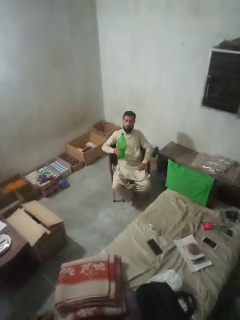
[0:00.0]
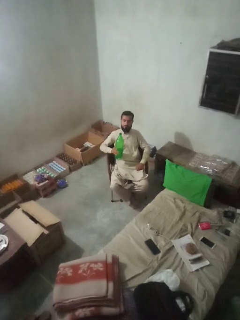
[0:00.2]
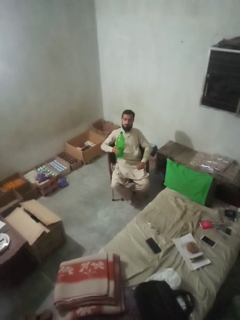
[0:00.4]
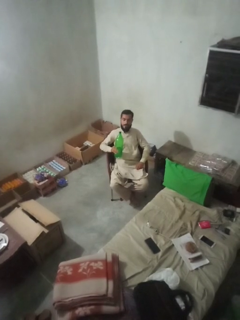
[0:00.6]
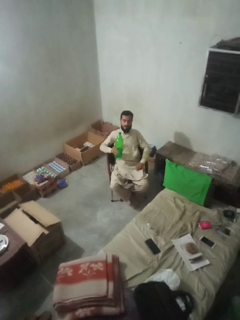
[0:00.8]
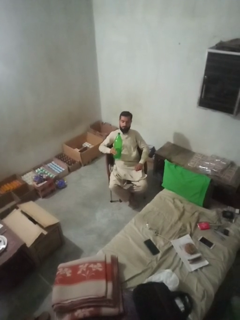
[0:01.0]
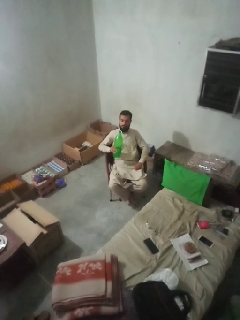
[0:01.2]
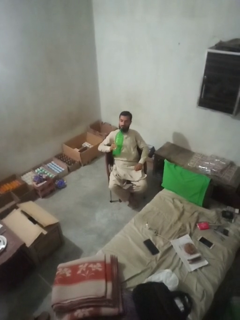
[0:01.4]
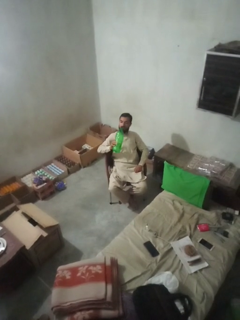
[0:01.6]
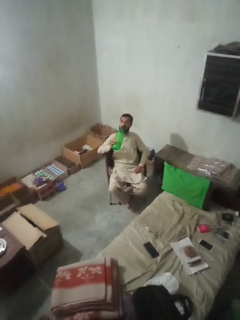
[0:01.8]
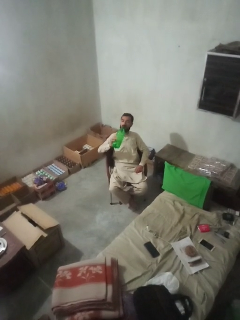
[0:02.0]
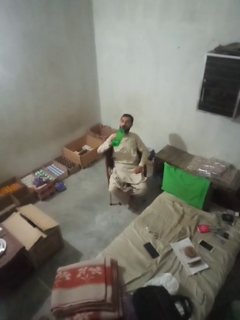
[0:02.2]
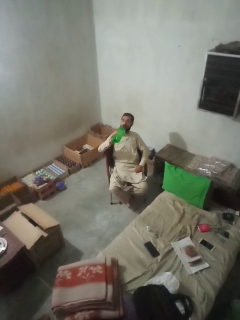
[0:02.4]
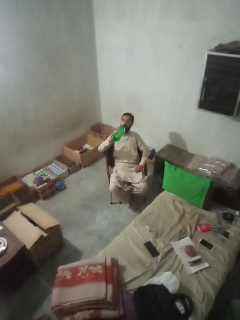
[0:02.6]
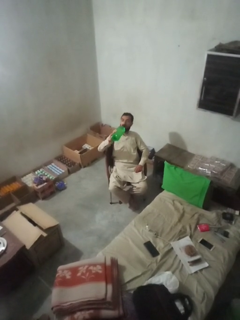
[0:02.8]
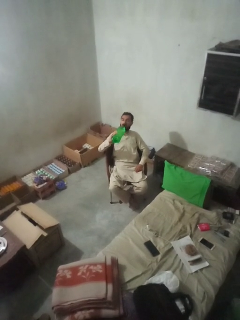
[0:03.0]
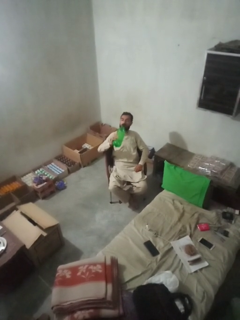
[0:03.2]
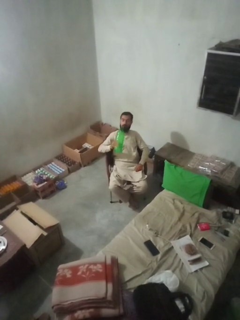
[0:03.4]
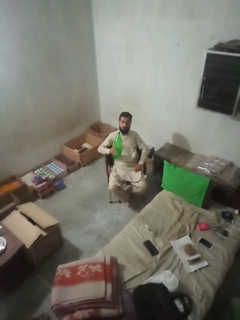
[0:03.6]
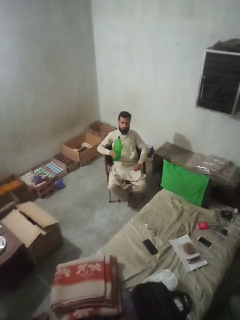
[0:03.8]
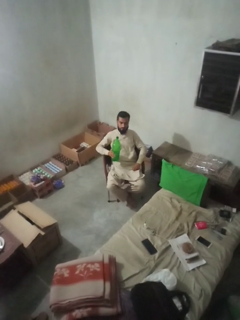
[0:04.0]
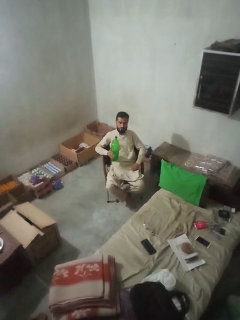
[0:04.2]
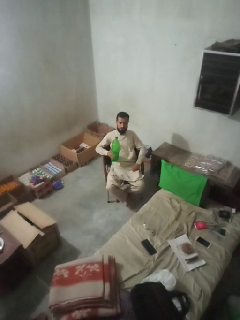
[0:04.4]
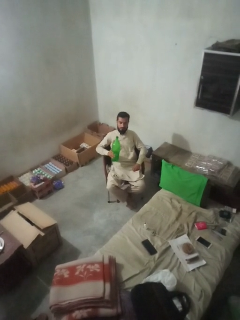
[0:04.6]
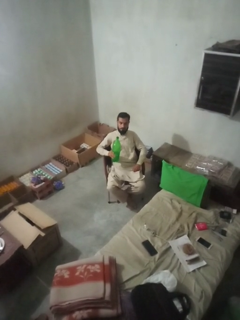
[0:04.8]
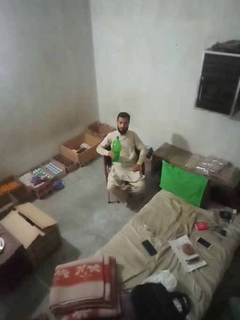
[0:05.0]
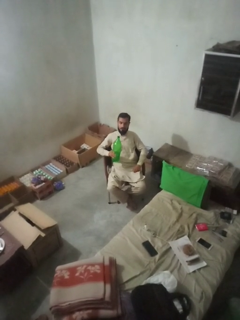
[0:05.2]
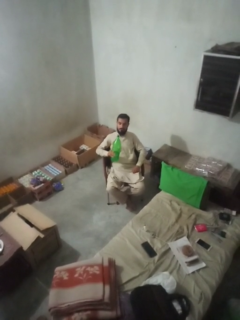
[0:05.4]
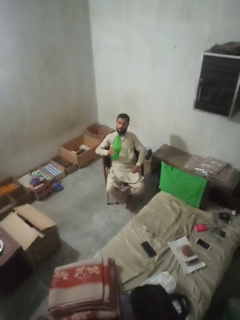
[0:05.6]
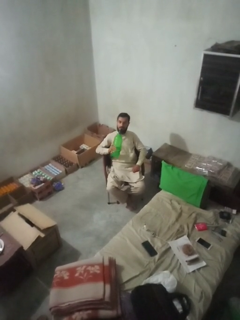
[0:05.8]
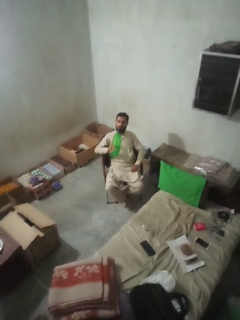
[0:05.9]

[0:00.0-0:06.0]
person drinks from bottle

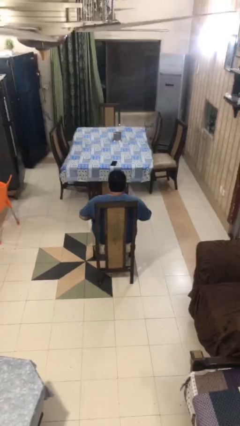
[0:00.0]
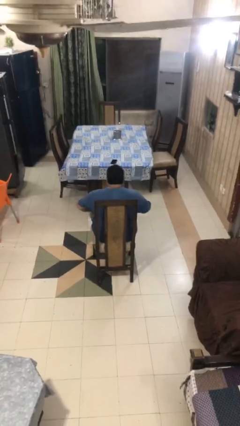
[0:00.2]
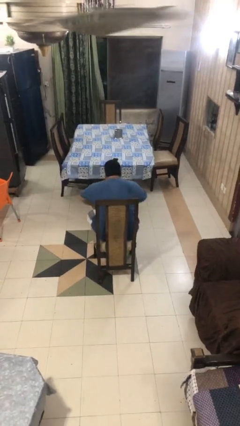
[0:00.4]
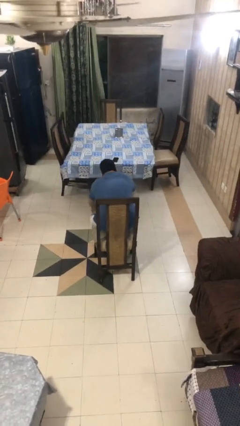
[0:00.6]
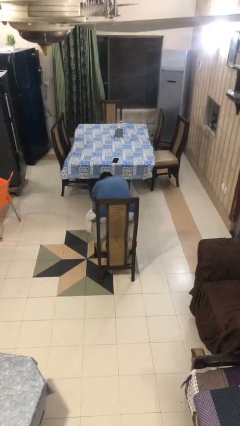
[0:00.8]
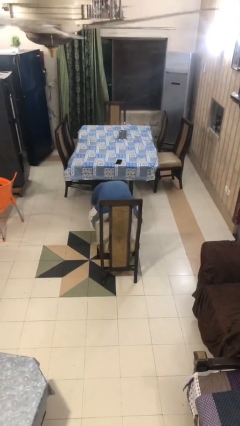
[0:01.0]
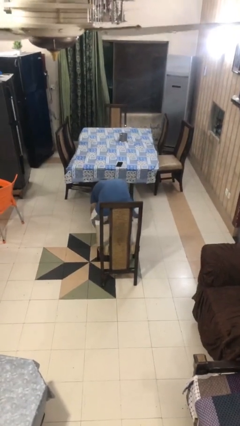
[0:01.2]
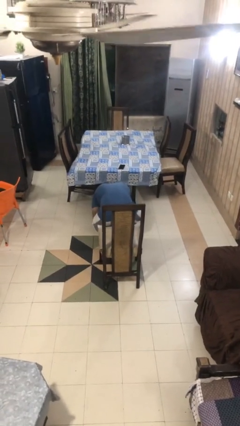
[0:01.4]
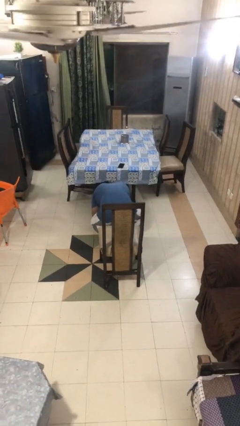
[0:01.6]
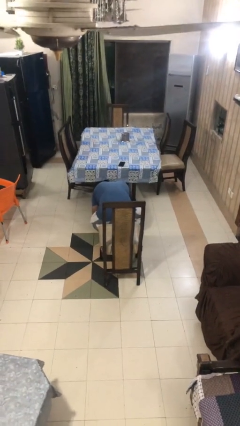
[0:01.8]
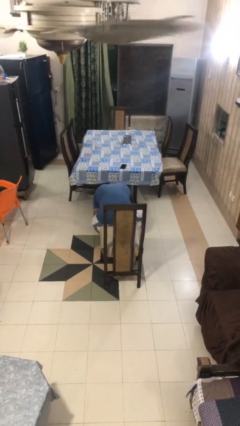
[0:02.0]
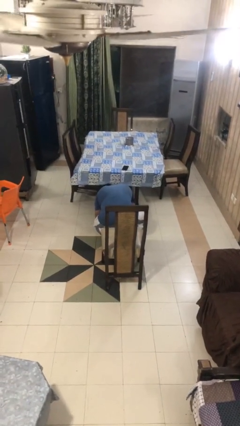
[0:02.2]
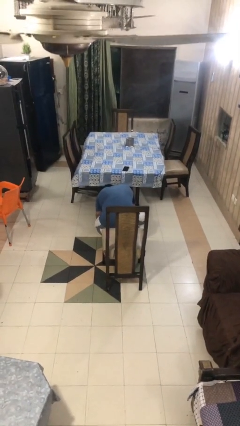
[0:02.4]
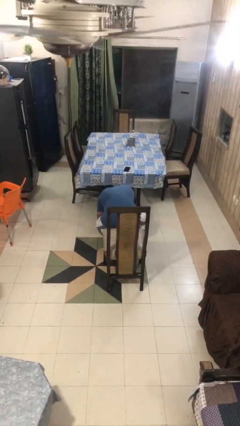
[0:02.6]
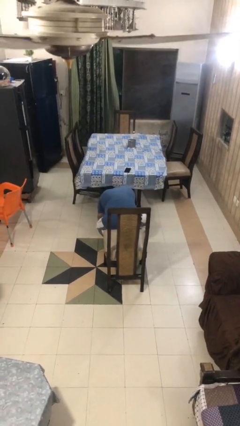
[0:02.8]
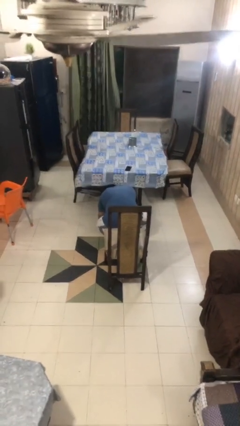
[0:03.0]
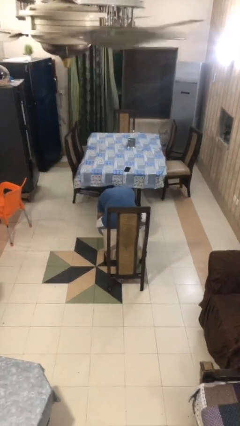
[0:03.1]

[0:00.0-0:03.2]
person falls from chair

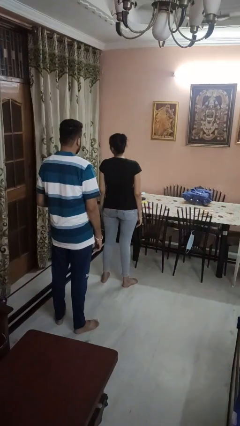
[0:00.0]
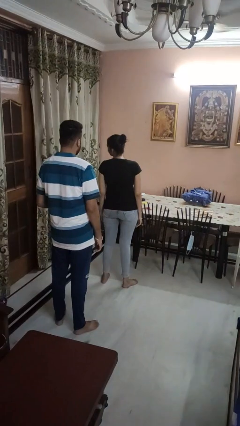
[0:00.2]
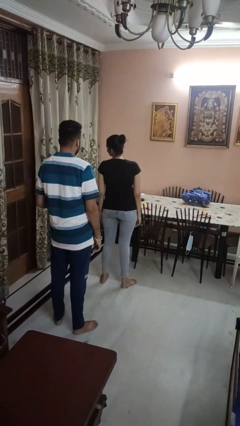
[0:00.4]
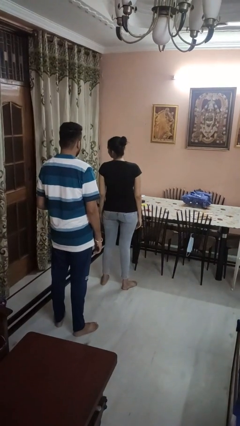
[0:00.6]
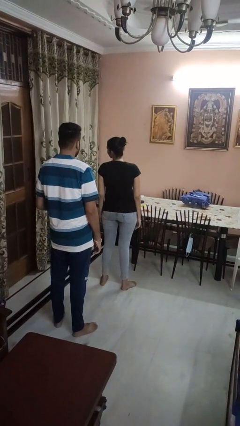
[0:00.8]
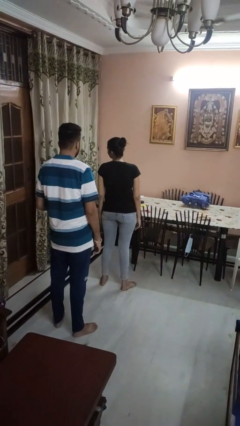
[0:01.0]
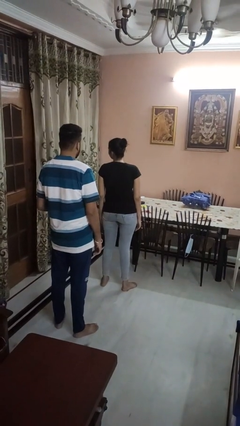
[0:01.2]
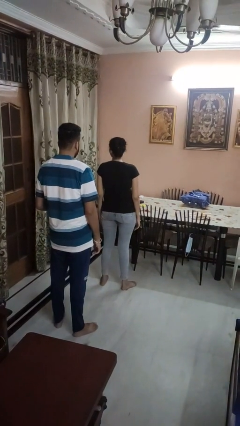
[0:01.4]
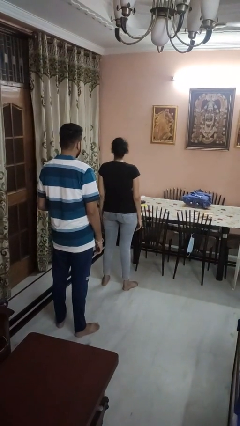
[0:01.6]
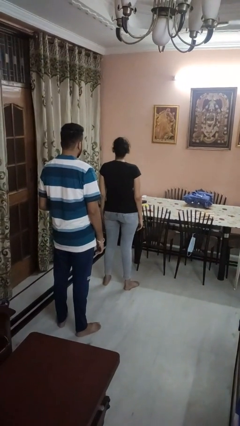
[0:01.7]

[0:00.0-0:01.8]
person looks over shoulder

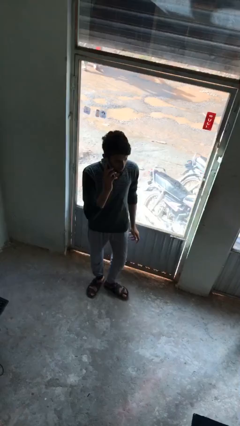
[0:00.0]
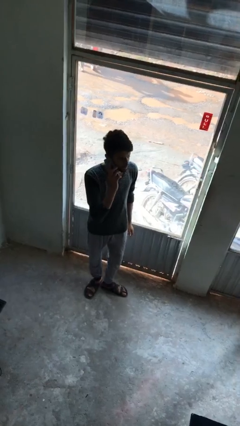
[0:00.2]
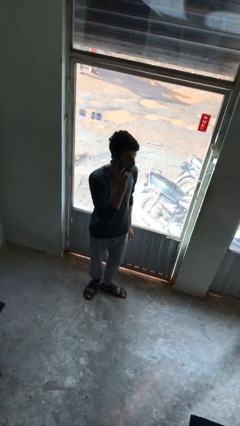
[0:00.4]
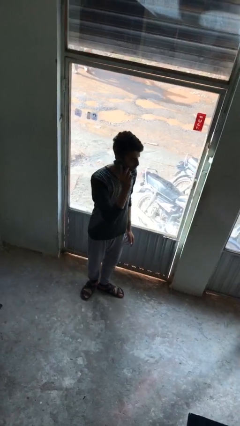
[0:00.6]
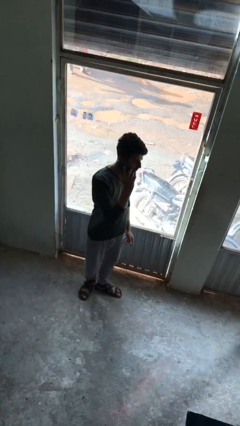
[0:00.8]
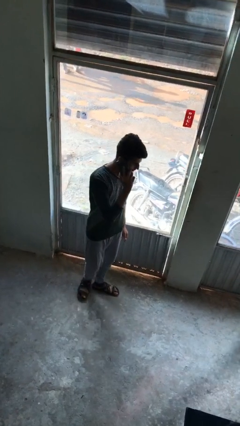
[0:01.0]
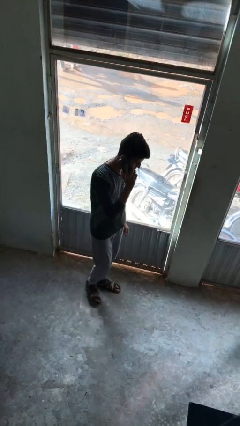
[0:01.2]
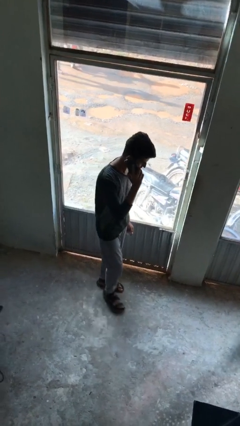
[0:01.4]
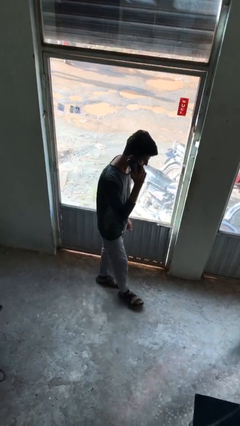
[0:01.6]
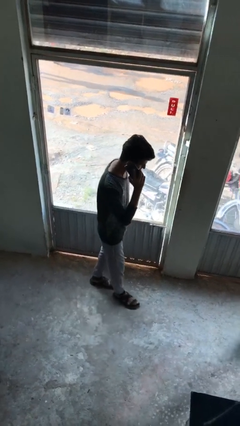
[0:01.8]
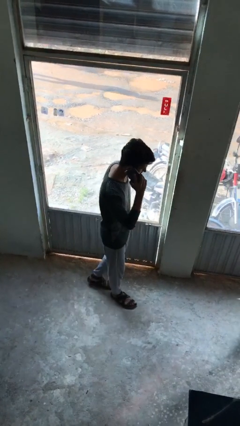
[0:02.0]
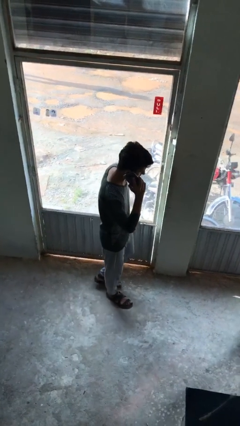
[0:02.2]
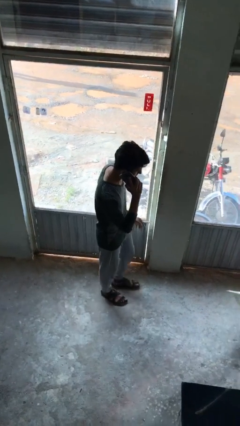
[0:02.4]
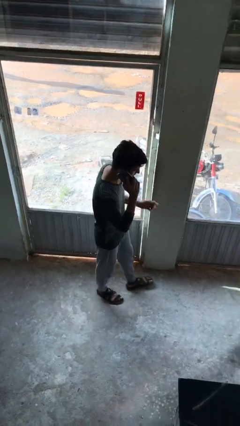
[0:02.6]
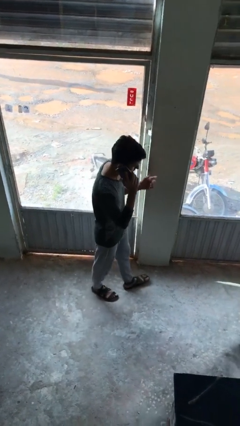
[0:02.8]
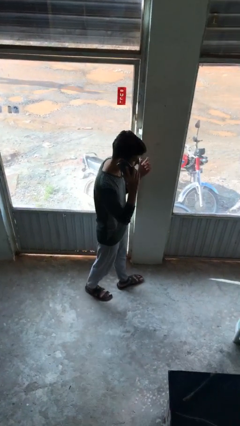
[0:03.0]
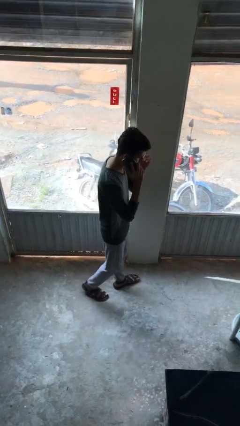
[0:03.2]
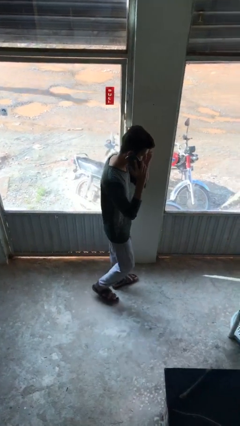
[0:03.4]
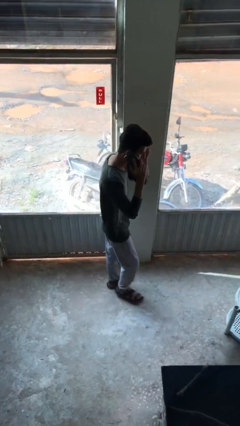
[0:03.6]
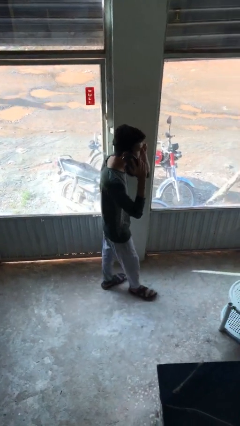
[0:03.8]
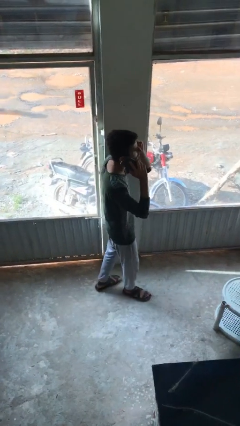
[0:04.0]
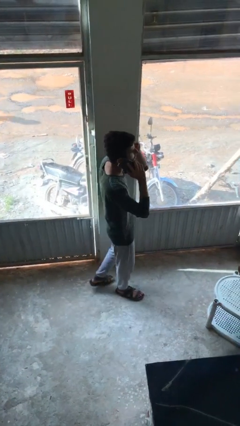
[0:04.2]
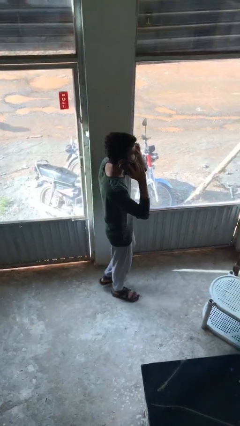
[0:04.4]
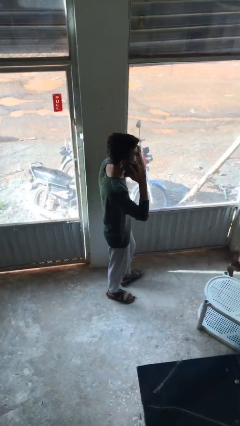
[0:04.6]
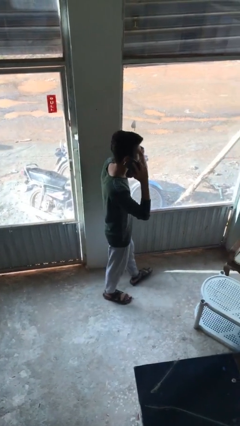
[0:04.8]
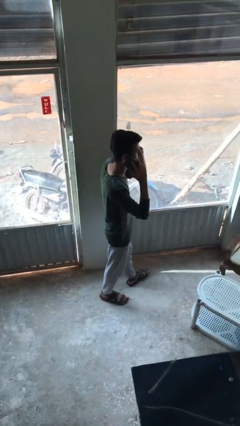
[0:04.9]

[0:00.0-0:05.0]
person talks on phone

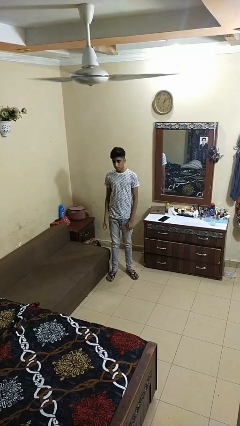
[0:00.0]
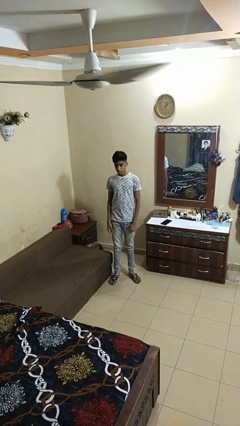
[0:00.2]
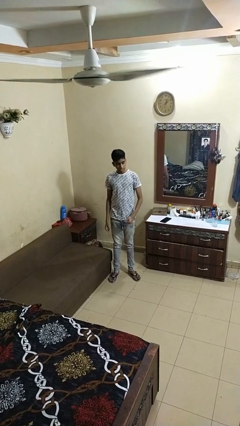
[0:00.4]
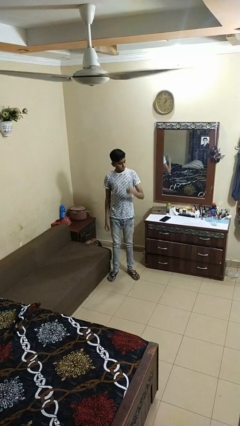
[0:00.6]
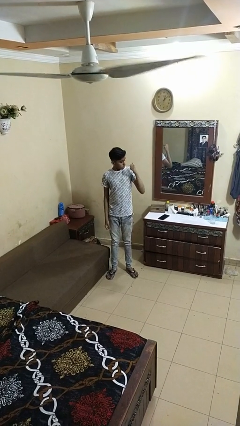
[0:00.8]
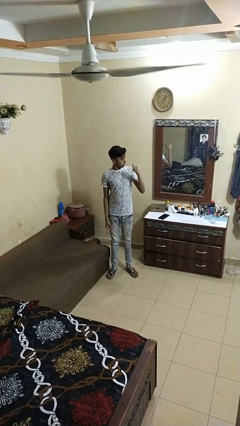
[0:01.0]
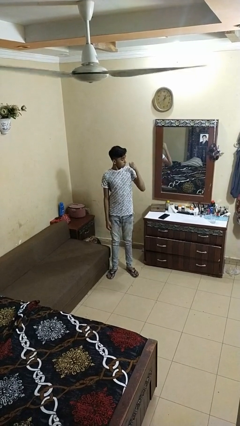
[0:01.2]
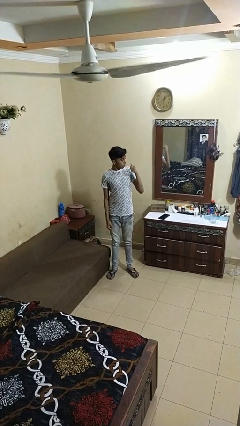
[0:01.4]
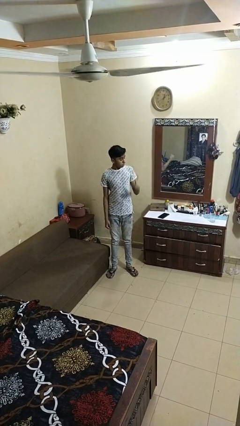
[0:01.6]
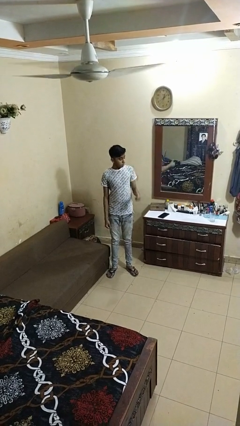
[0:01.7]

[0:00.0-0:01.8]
person gestures behind me

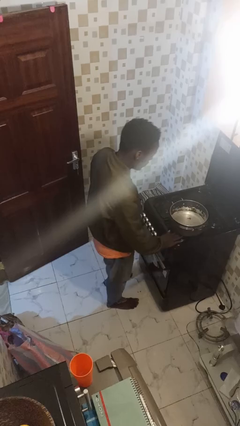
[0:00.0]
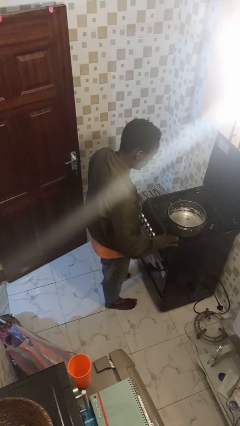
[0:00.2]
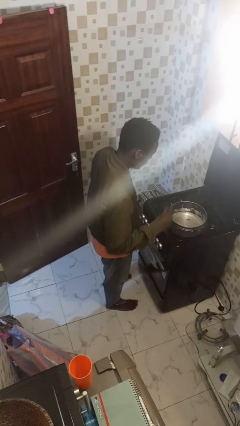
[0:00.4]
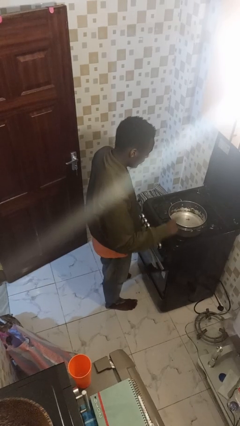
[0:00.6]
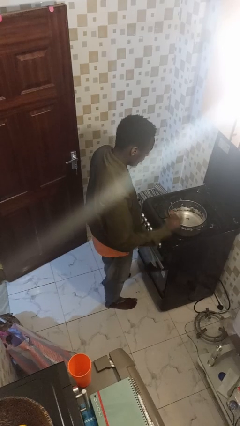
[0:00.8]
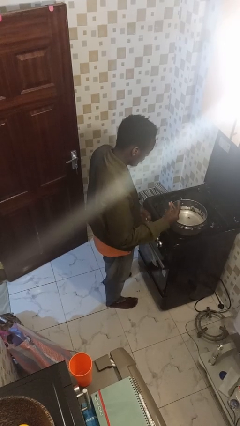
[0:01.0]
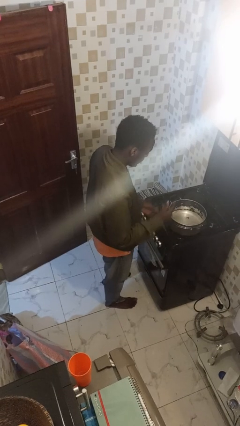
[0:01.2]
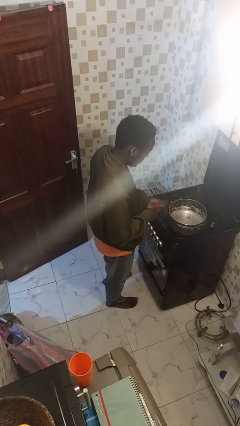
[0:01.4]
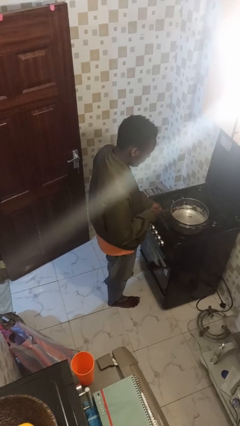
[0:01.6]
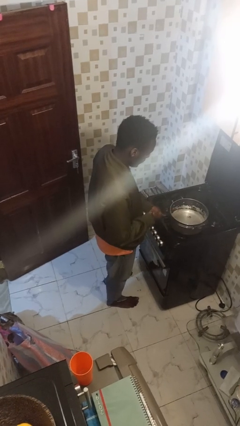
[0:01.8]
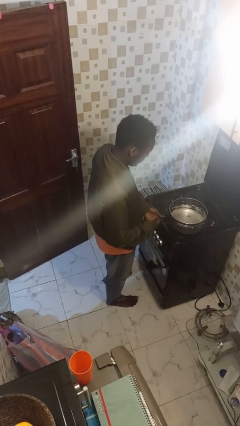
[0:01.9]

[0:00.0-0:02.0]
person burns hand
